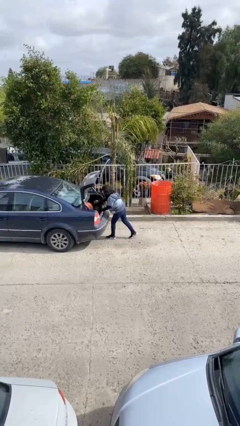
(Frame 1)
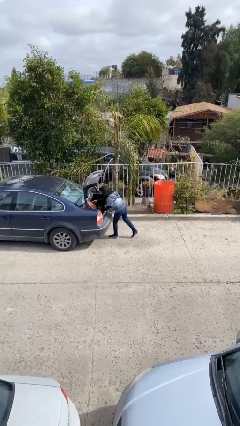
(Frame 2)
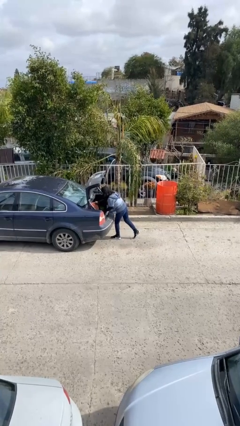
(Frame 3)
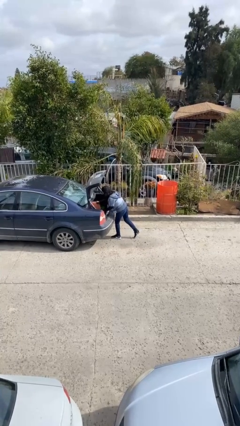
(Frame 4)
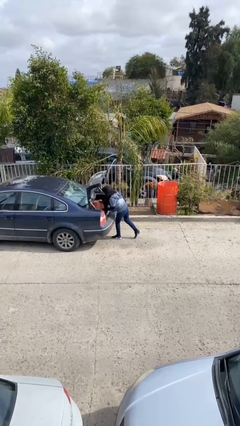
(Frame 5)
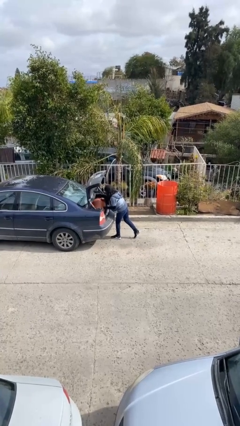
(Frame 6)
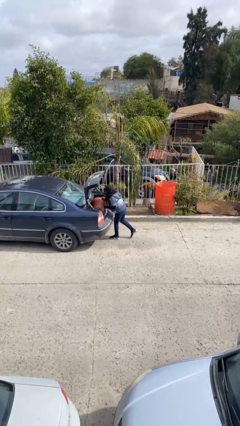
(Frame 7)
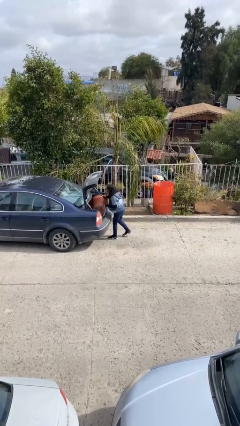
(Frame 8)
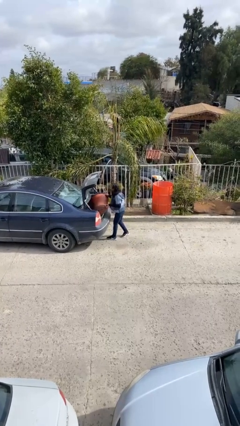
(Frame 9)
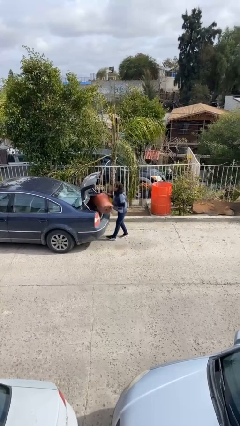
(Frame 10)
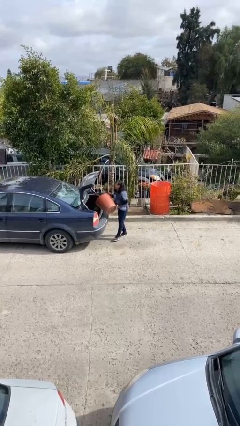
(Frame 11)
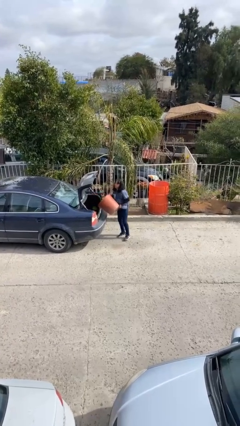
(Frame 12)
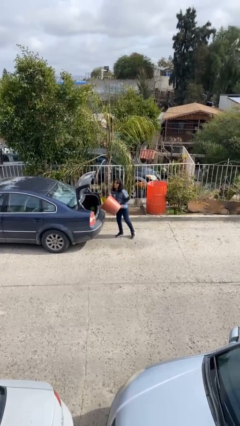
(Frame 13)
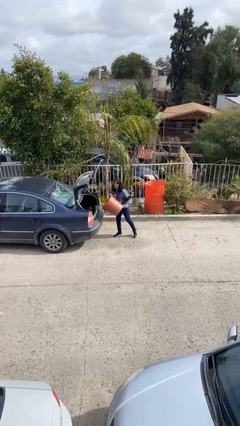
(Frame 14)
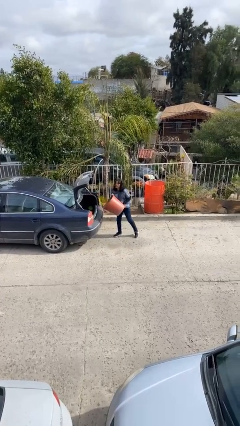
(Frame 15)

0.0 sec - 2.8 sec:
person unloads car

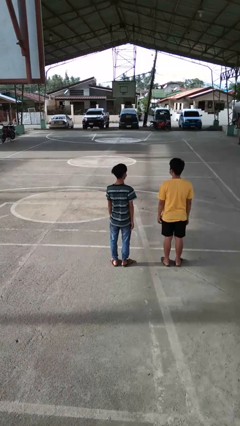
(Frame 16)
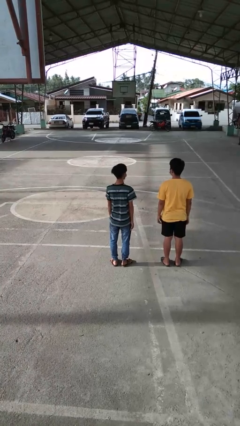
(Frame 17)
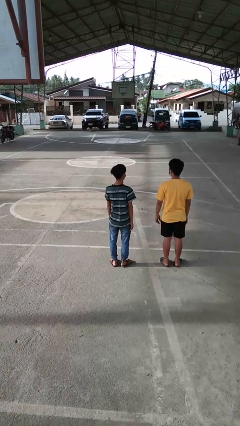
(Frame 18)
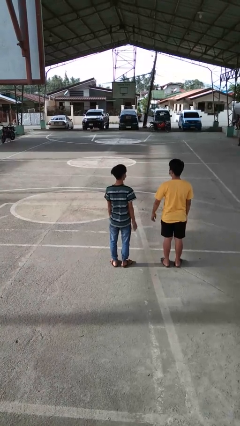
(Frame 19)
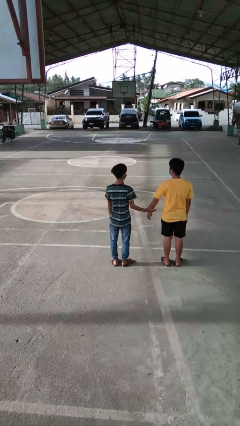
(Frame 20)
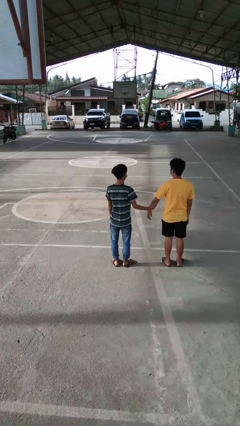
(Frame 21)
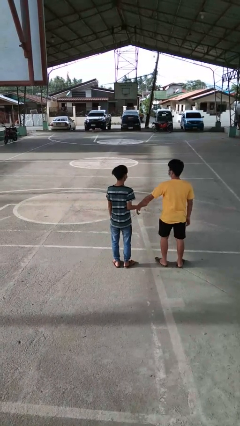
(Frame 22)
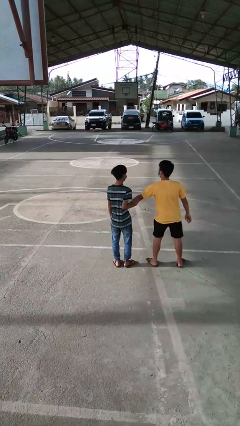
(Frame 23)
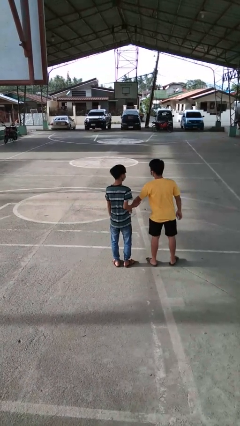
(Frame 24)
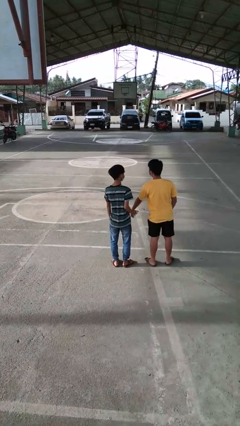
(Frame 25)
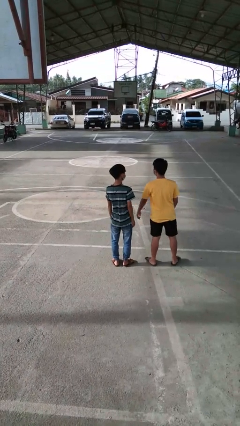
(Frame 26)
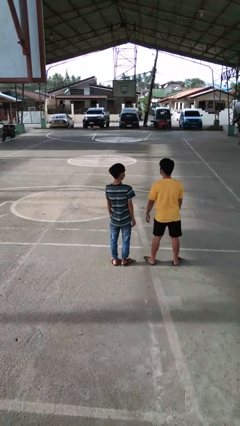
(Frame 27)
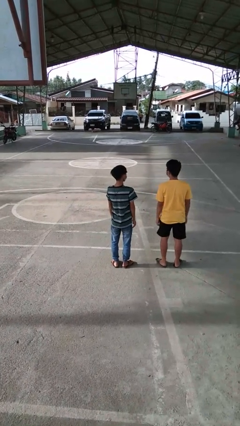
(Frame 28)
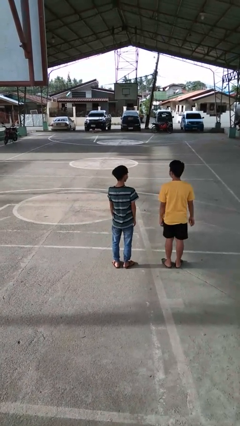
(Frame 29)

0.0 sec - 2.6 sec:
person grabs person by forearm

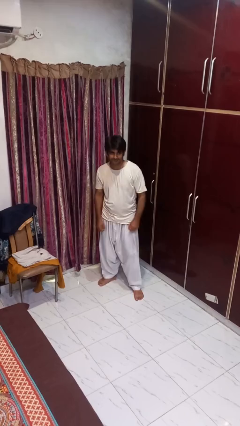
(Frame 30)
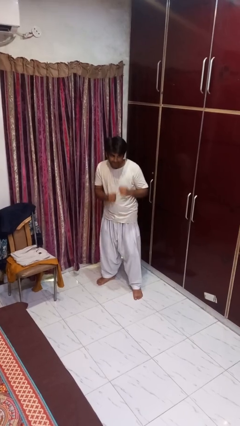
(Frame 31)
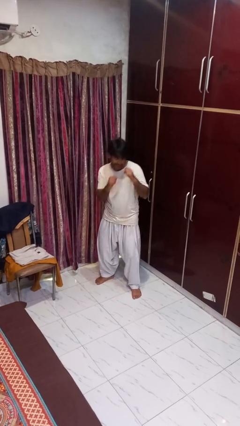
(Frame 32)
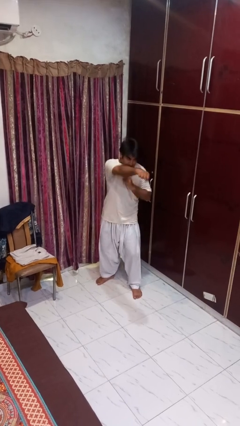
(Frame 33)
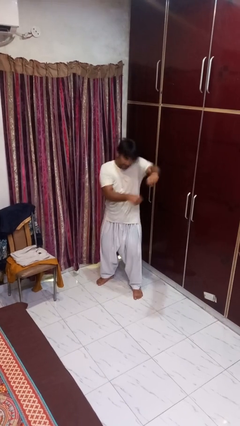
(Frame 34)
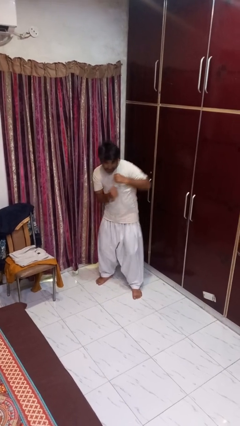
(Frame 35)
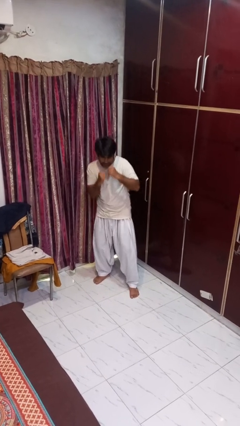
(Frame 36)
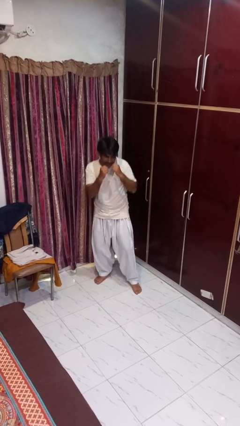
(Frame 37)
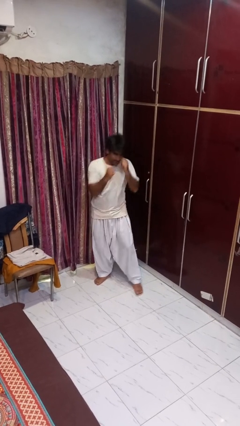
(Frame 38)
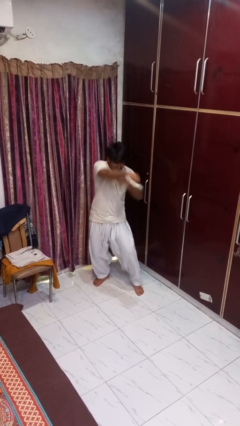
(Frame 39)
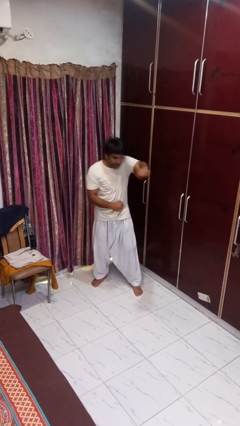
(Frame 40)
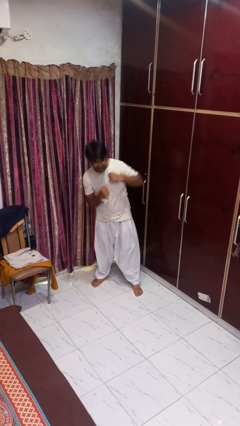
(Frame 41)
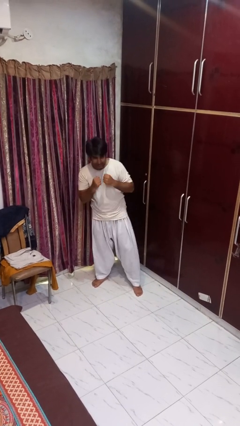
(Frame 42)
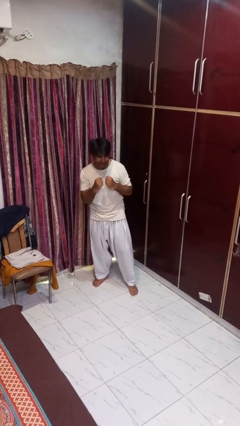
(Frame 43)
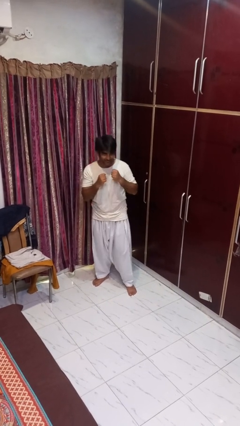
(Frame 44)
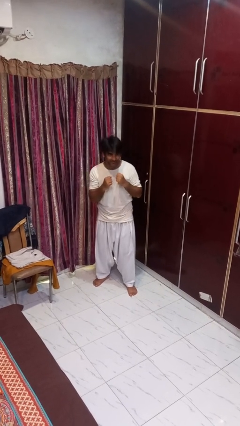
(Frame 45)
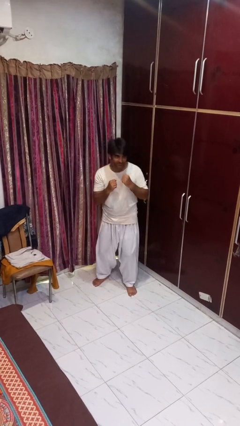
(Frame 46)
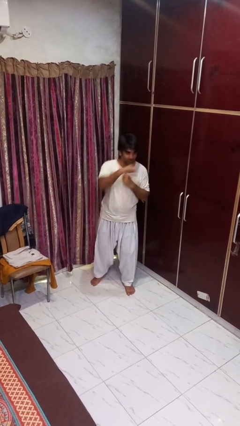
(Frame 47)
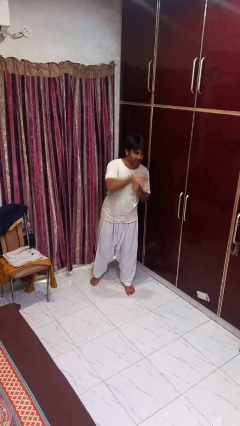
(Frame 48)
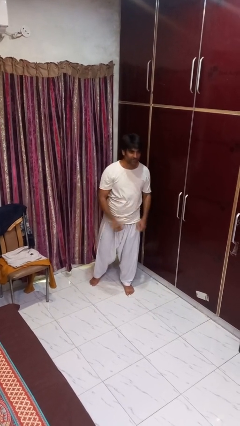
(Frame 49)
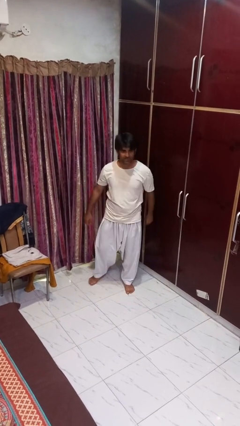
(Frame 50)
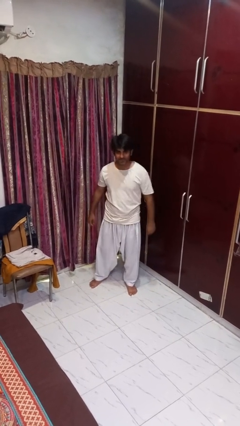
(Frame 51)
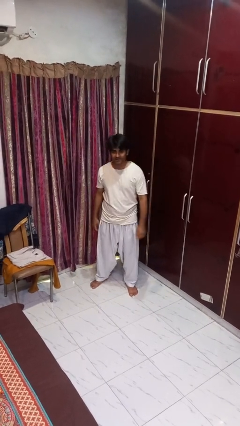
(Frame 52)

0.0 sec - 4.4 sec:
person punches

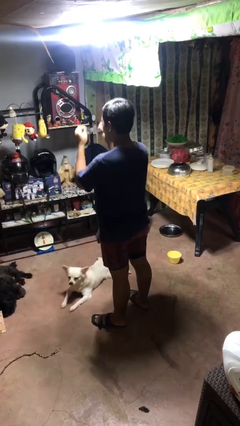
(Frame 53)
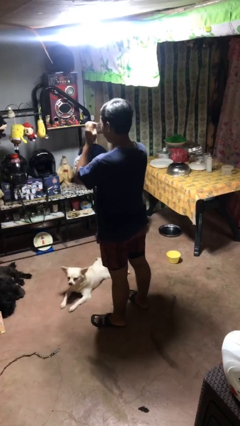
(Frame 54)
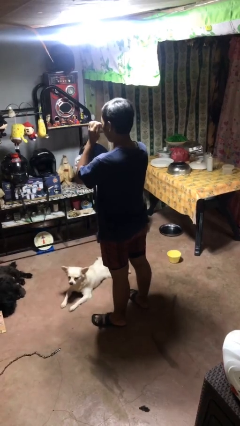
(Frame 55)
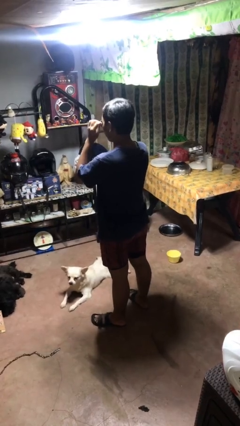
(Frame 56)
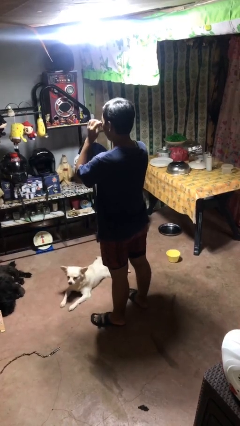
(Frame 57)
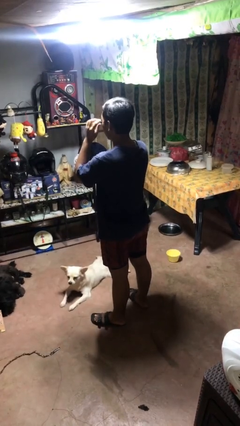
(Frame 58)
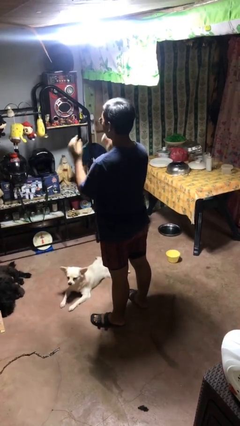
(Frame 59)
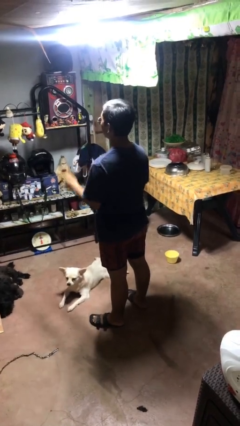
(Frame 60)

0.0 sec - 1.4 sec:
person puts on sunglasses

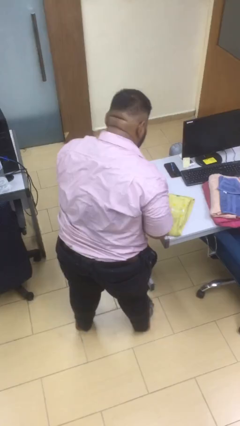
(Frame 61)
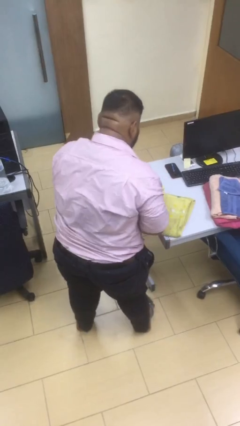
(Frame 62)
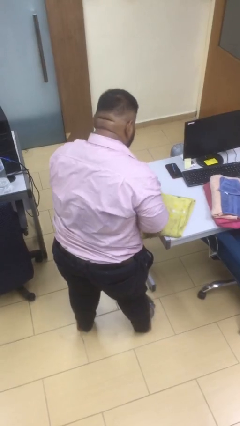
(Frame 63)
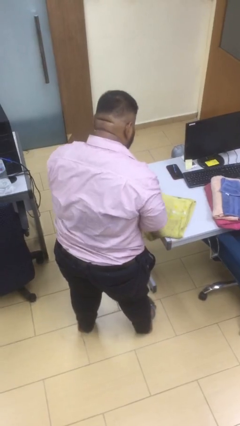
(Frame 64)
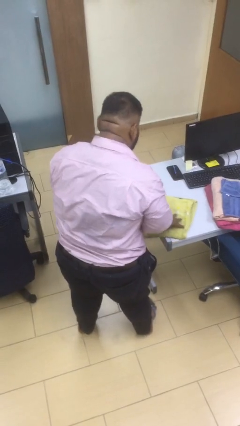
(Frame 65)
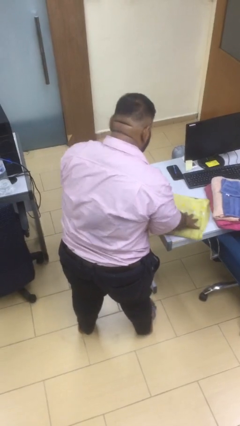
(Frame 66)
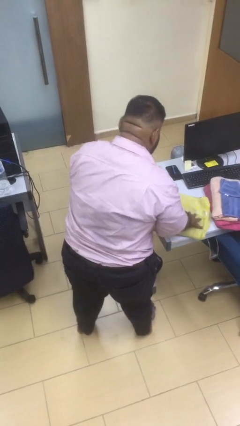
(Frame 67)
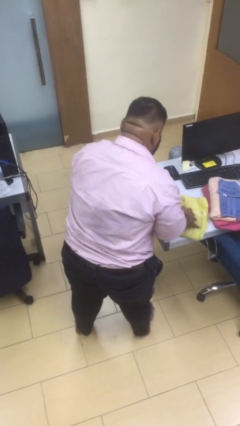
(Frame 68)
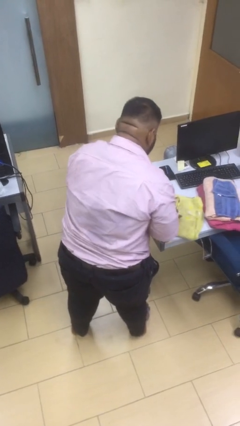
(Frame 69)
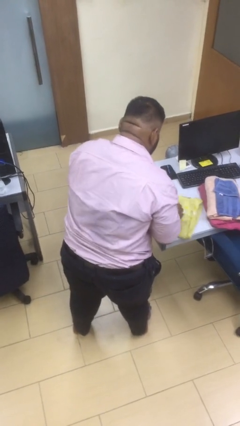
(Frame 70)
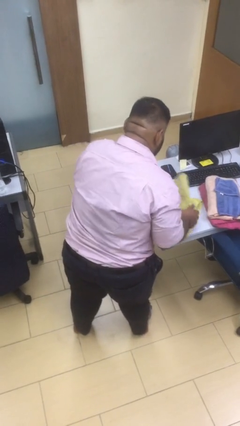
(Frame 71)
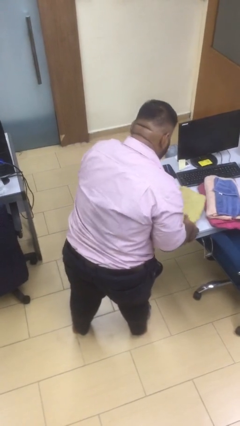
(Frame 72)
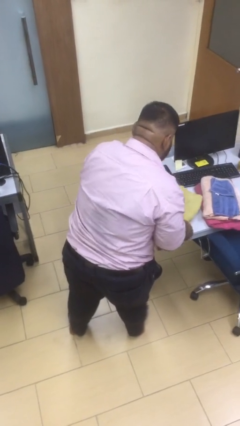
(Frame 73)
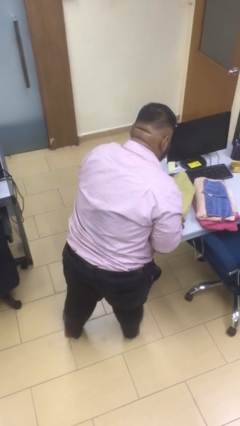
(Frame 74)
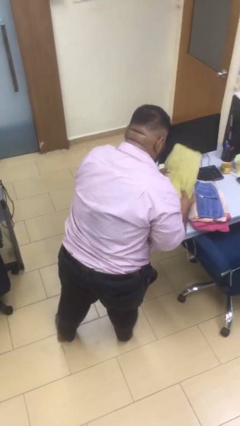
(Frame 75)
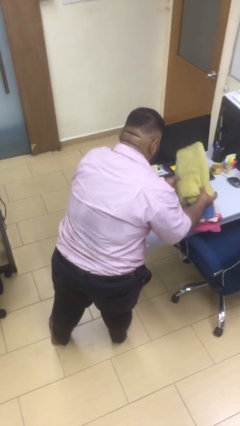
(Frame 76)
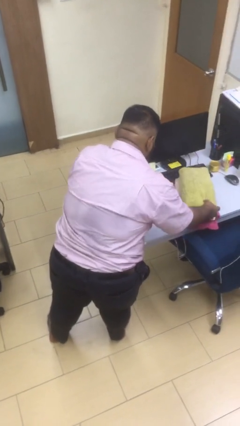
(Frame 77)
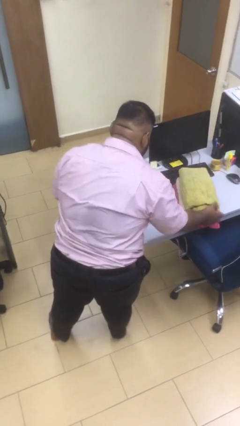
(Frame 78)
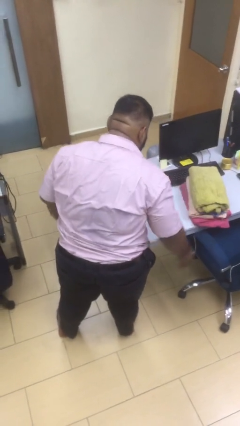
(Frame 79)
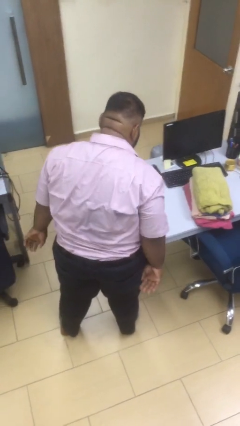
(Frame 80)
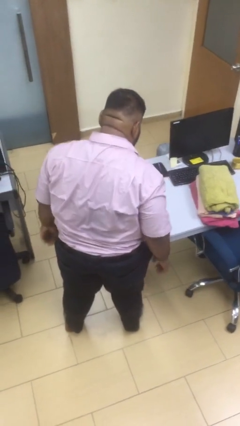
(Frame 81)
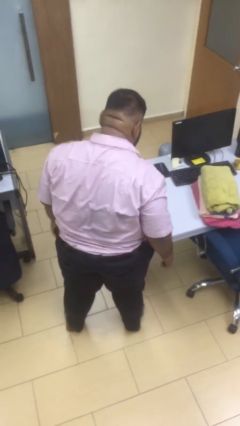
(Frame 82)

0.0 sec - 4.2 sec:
person folds towel

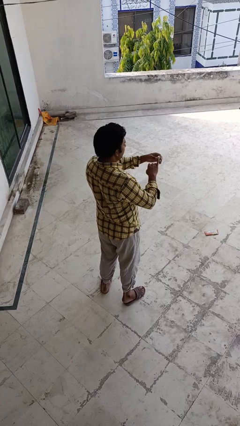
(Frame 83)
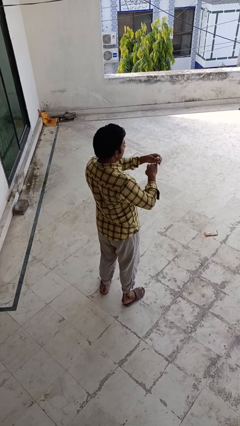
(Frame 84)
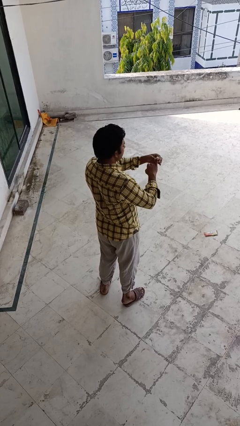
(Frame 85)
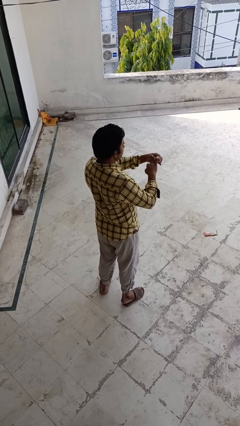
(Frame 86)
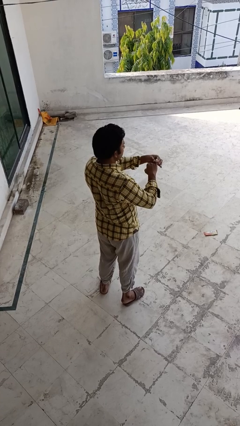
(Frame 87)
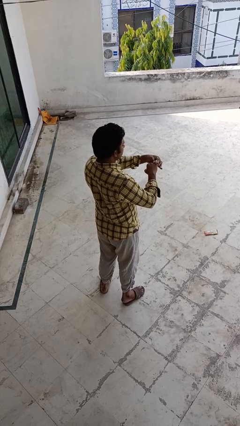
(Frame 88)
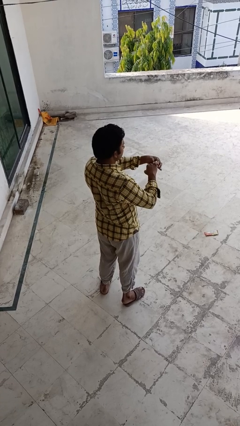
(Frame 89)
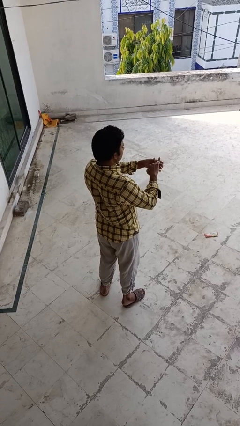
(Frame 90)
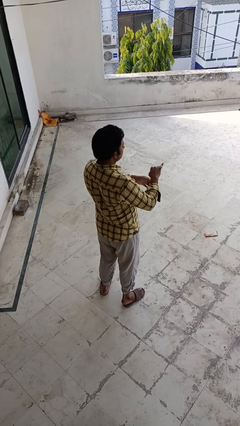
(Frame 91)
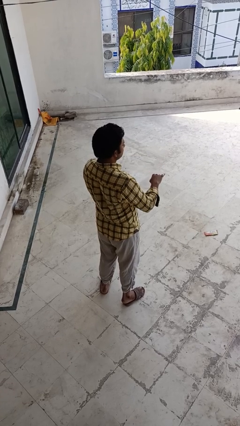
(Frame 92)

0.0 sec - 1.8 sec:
person puts on ring

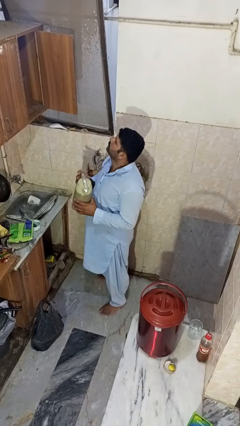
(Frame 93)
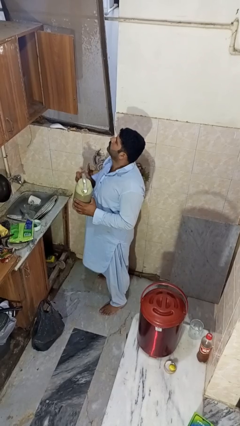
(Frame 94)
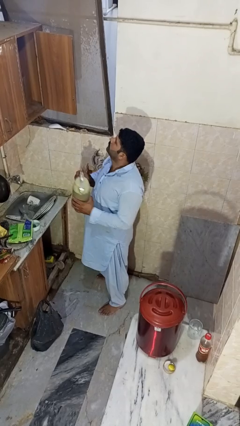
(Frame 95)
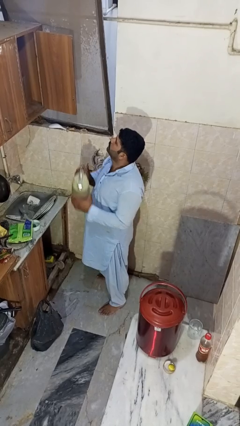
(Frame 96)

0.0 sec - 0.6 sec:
person puts object in cabinet
